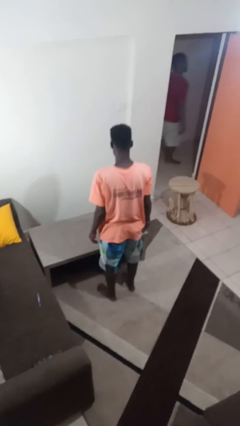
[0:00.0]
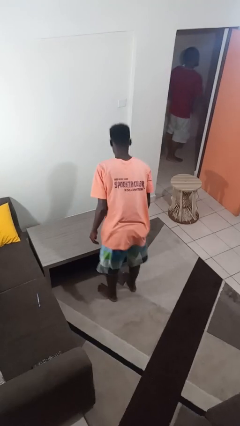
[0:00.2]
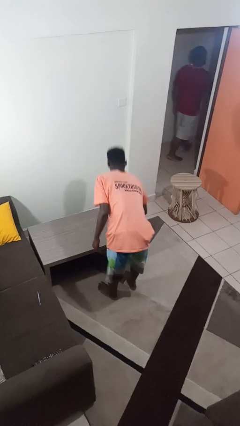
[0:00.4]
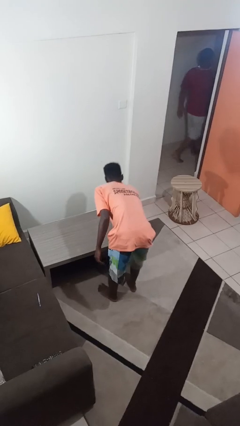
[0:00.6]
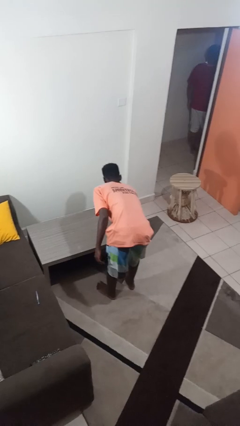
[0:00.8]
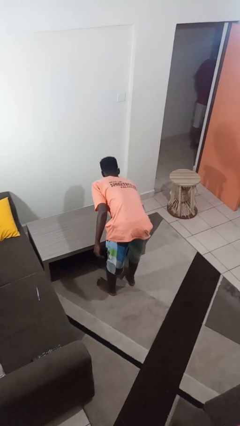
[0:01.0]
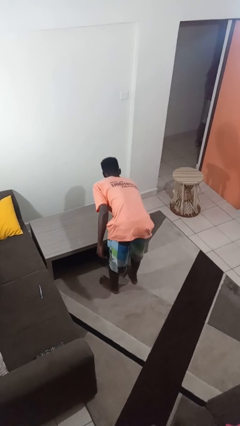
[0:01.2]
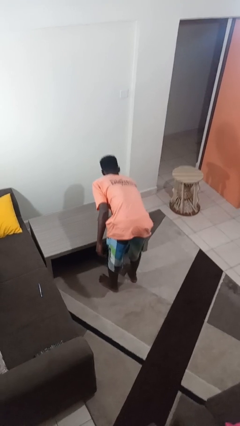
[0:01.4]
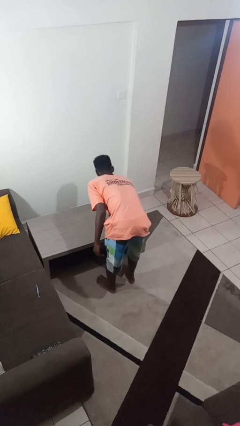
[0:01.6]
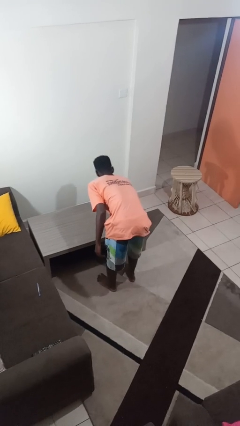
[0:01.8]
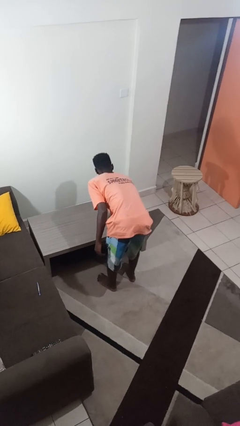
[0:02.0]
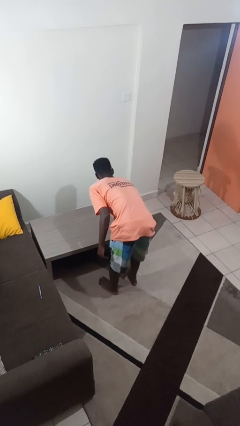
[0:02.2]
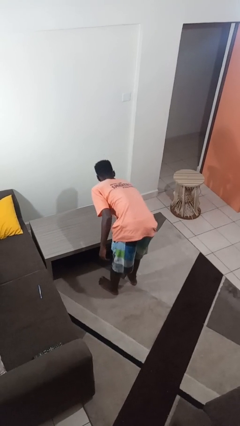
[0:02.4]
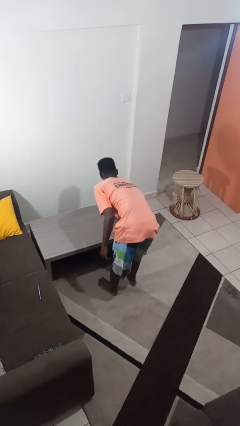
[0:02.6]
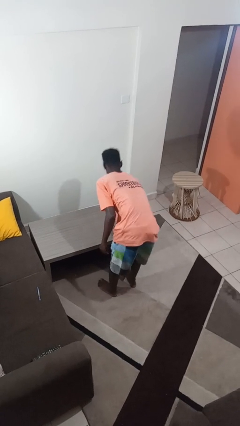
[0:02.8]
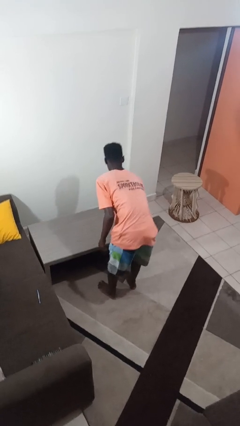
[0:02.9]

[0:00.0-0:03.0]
person cleans table with rag

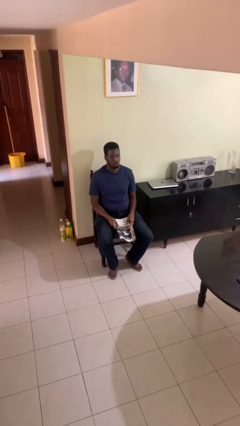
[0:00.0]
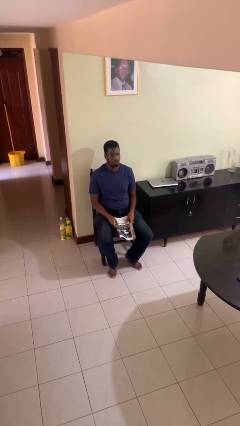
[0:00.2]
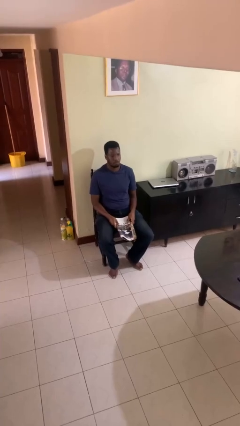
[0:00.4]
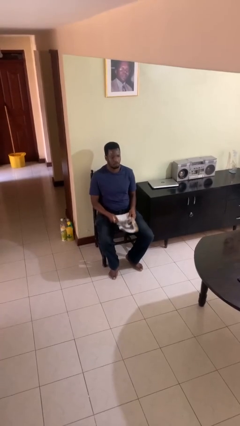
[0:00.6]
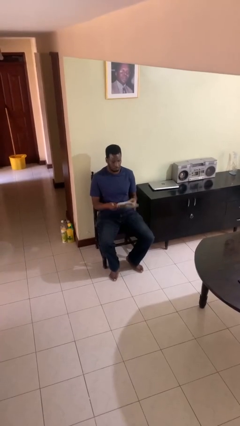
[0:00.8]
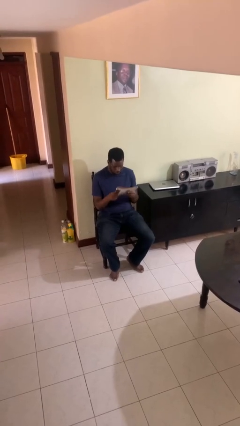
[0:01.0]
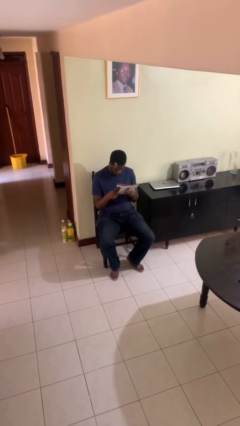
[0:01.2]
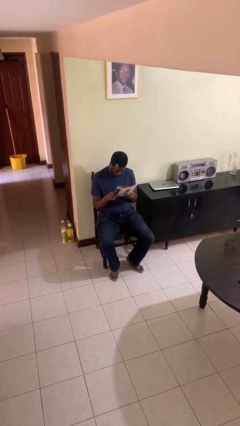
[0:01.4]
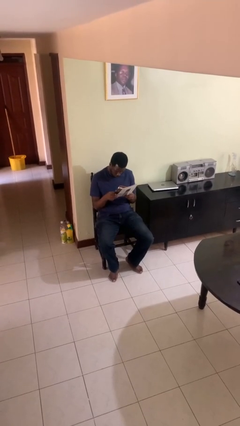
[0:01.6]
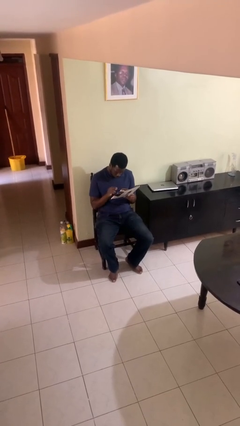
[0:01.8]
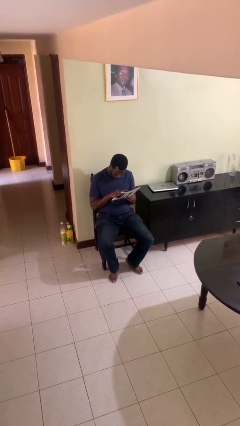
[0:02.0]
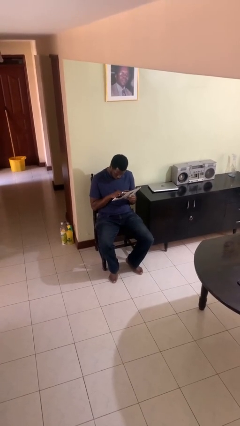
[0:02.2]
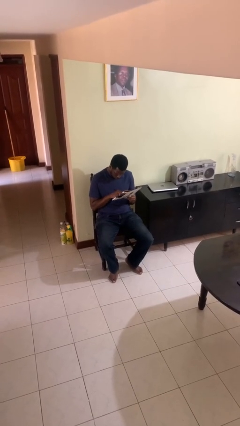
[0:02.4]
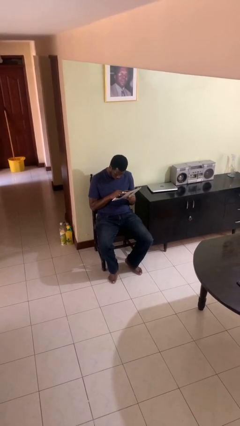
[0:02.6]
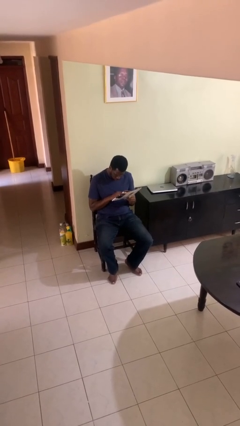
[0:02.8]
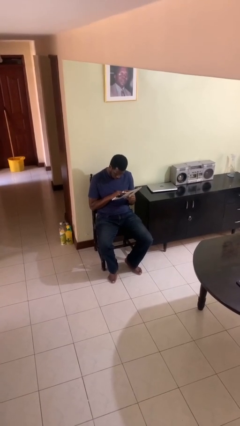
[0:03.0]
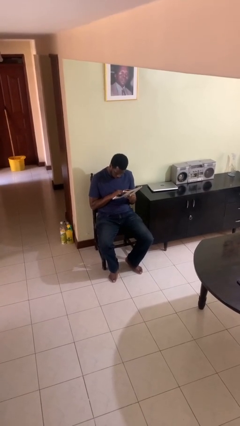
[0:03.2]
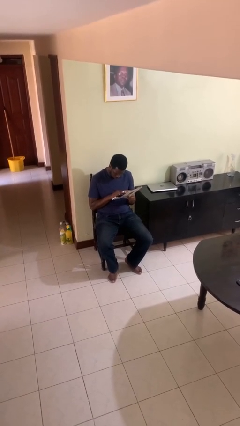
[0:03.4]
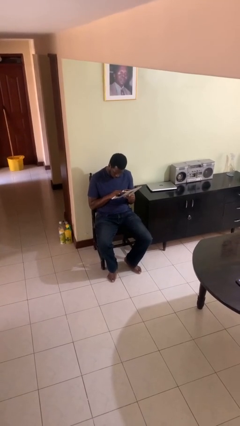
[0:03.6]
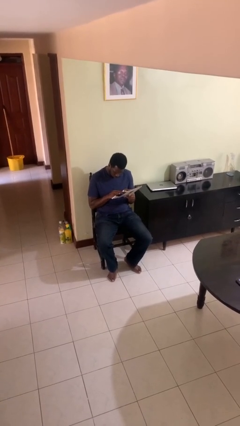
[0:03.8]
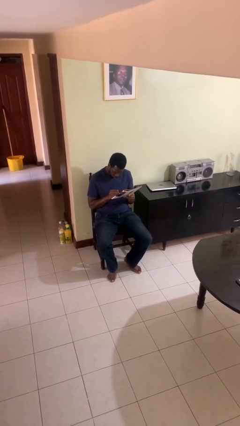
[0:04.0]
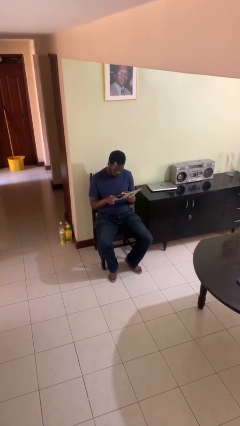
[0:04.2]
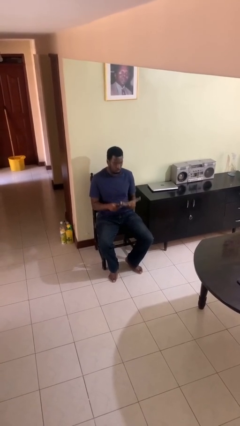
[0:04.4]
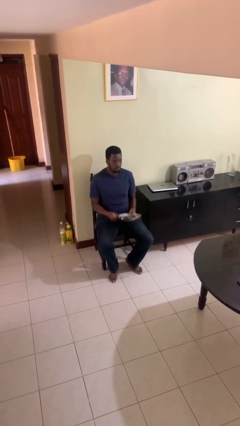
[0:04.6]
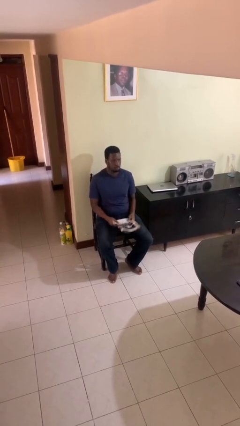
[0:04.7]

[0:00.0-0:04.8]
person reads document

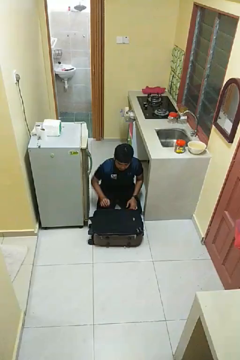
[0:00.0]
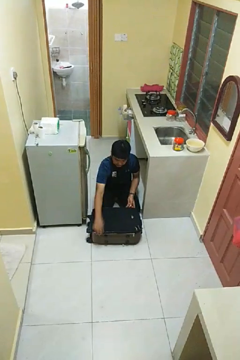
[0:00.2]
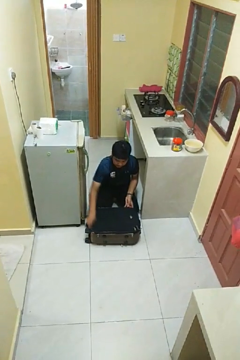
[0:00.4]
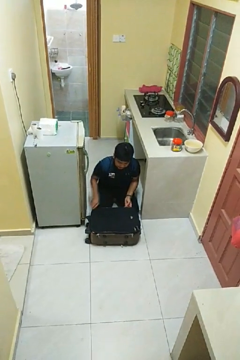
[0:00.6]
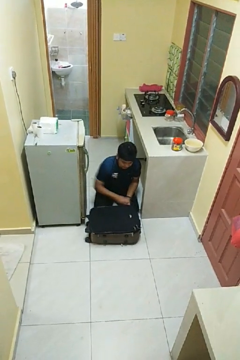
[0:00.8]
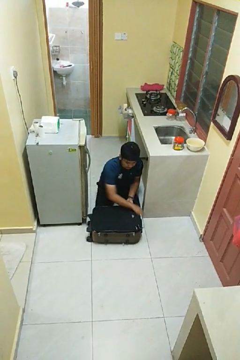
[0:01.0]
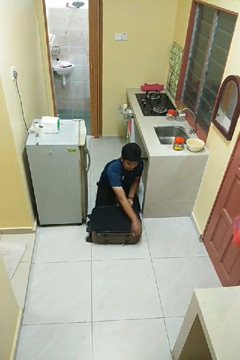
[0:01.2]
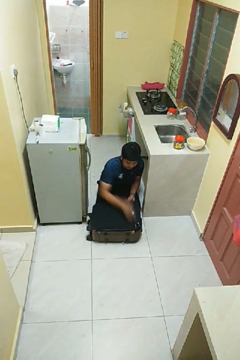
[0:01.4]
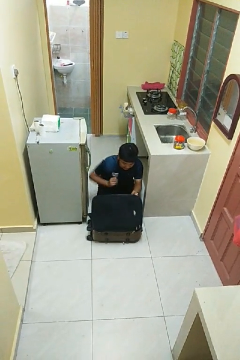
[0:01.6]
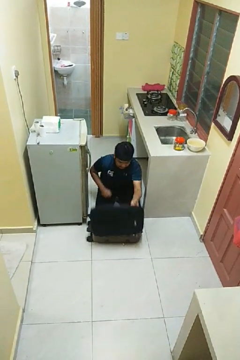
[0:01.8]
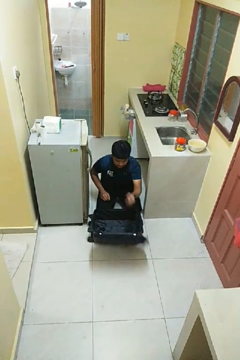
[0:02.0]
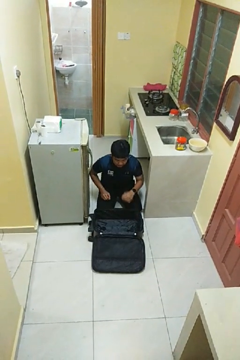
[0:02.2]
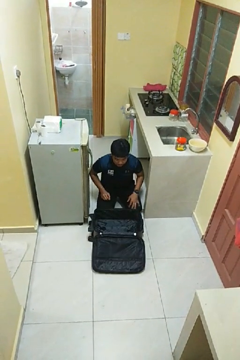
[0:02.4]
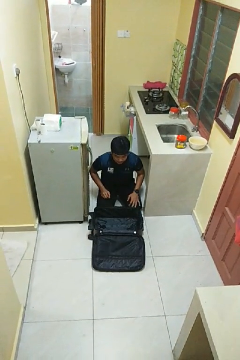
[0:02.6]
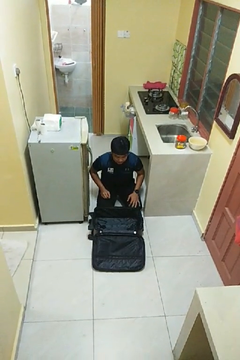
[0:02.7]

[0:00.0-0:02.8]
person opens suitcase

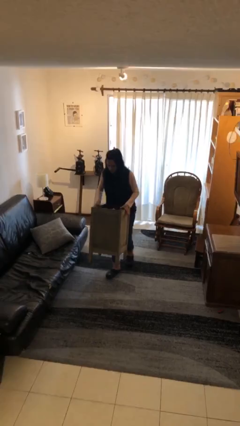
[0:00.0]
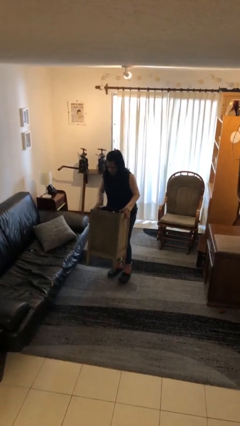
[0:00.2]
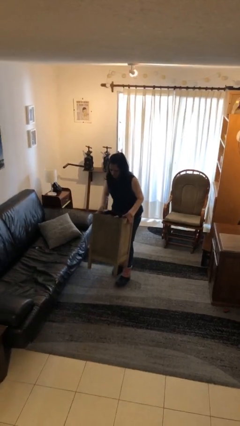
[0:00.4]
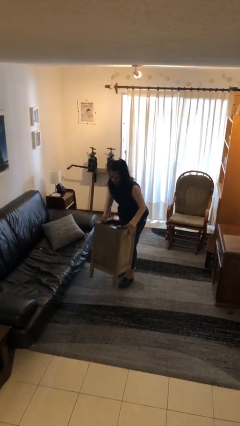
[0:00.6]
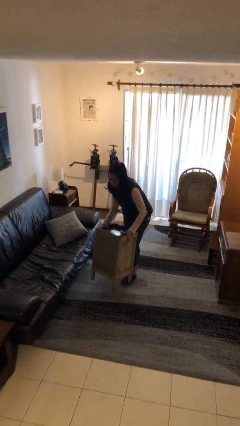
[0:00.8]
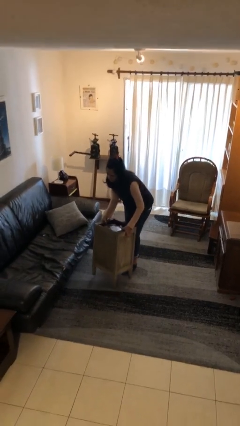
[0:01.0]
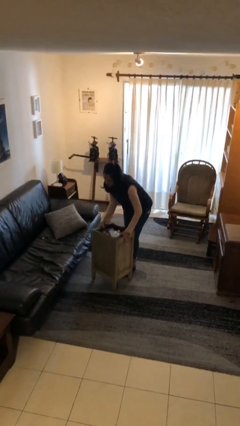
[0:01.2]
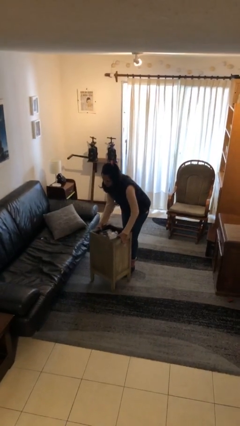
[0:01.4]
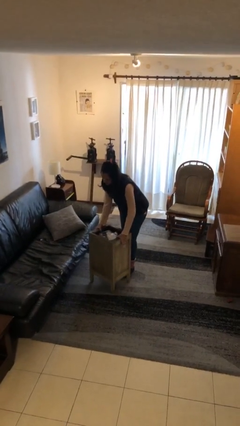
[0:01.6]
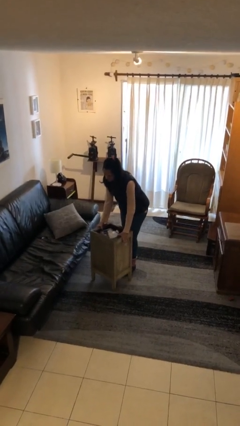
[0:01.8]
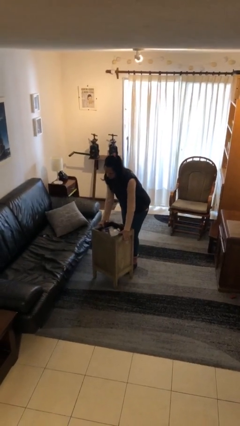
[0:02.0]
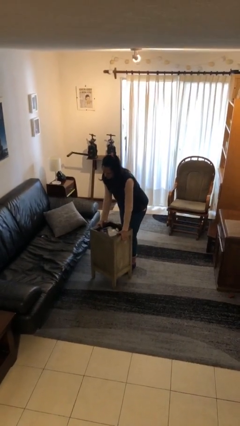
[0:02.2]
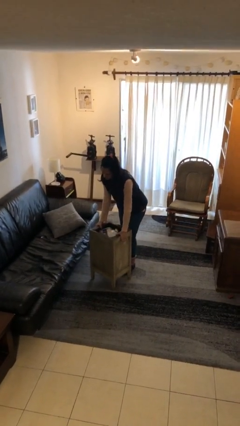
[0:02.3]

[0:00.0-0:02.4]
person puts down object on floor

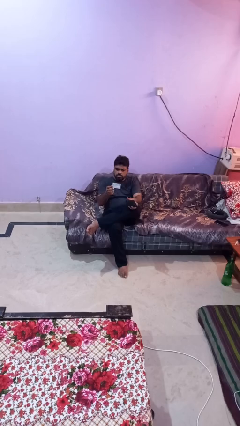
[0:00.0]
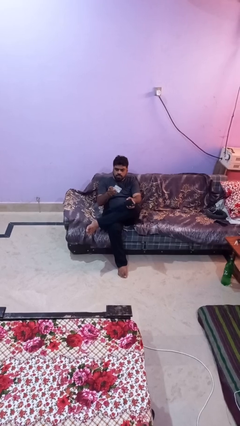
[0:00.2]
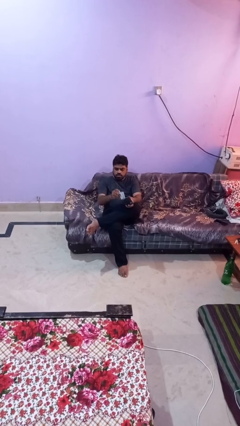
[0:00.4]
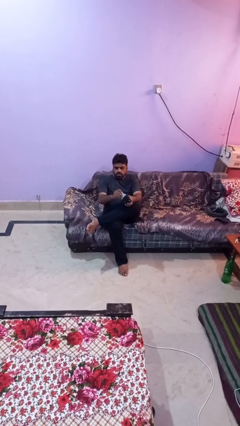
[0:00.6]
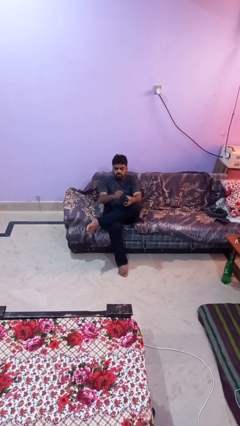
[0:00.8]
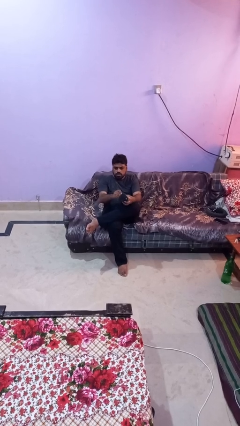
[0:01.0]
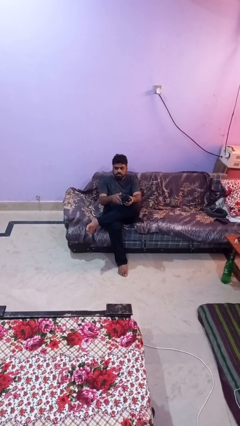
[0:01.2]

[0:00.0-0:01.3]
person puts object into purse

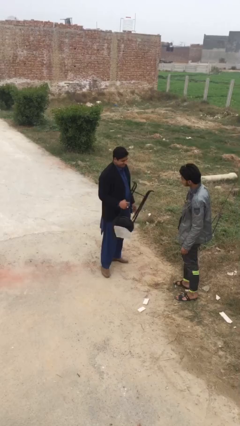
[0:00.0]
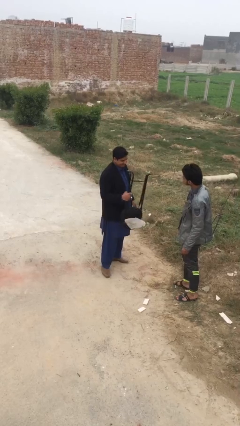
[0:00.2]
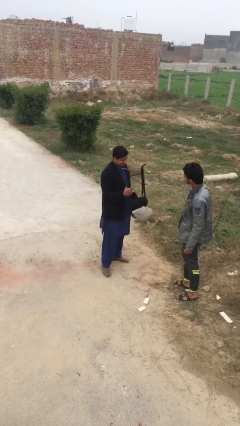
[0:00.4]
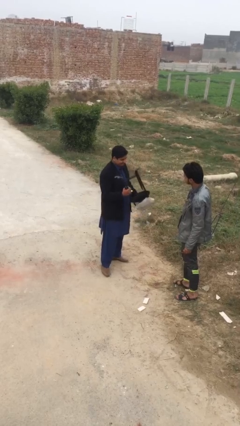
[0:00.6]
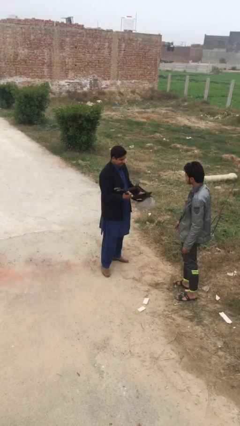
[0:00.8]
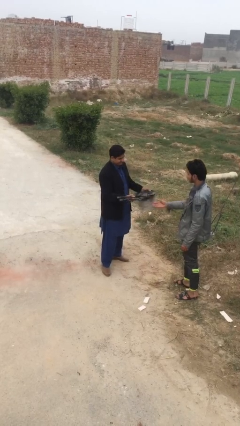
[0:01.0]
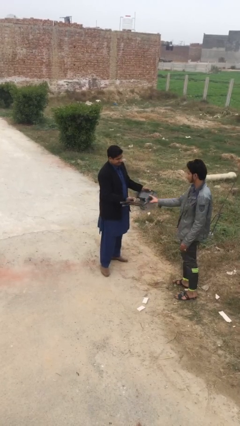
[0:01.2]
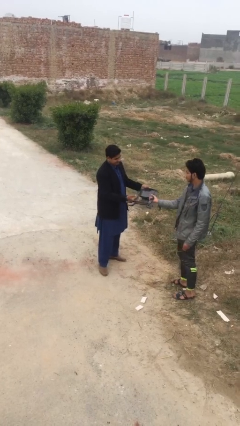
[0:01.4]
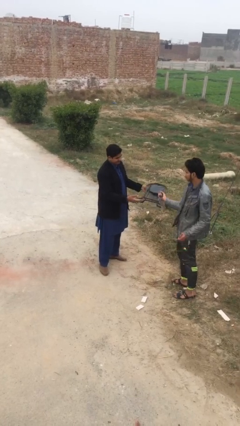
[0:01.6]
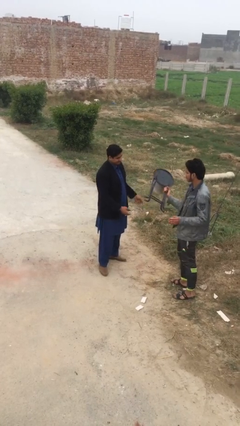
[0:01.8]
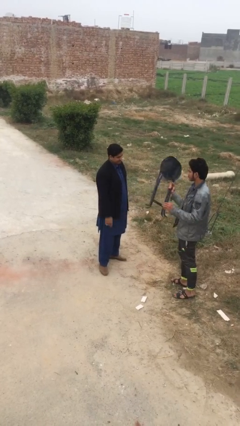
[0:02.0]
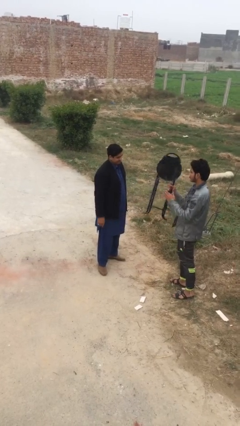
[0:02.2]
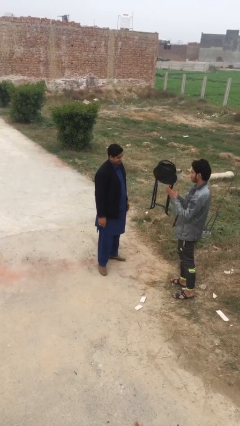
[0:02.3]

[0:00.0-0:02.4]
person transfers object to person

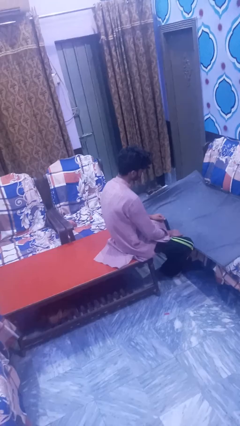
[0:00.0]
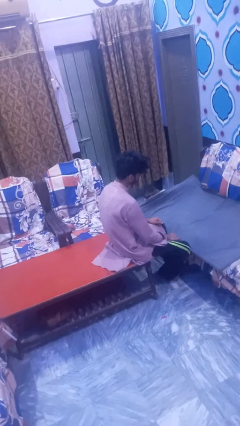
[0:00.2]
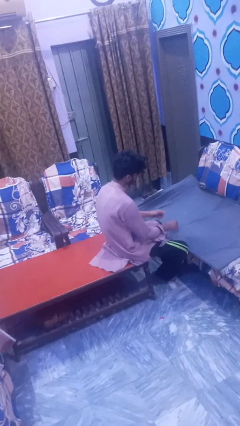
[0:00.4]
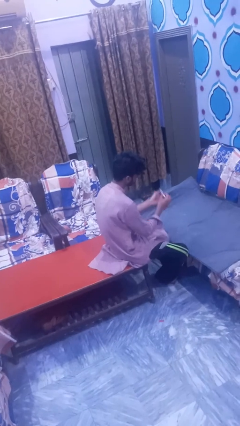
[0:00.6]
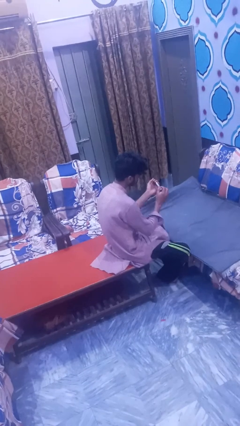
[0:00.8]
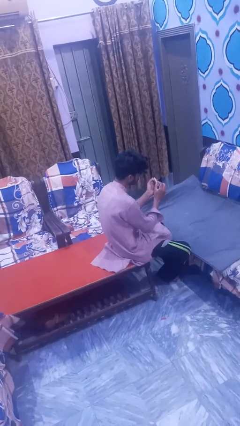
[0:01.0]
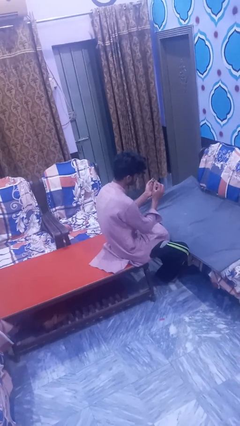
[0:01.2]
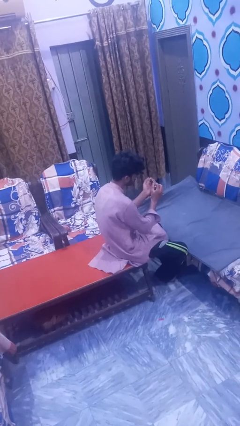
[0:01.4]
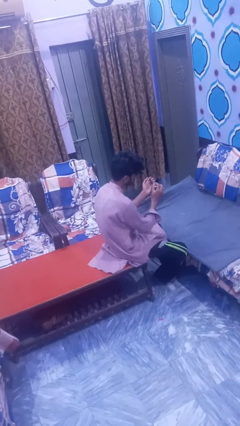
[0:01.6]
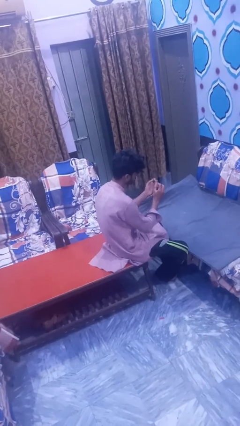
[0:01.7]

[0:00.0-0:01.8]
person files fingernails
